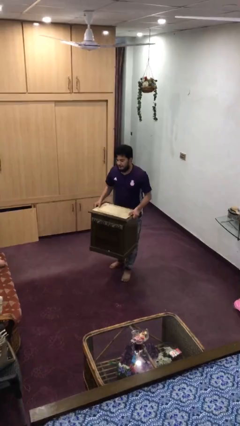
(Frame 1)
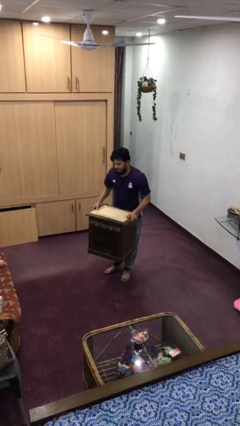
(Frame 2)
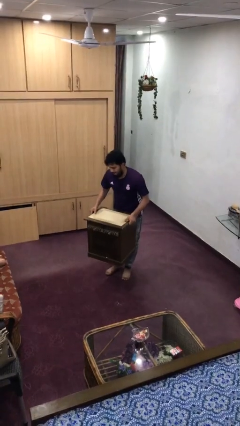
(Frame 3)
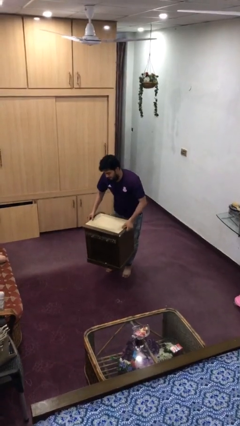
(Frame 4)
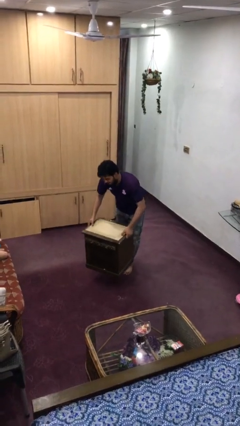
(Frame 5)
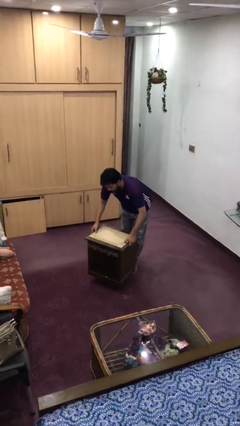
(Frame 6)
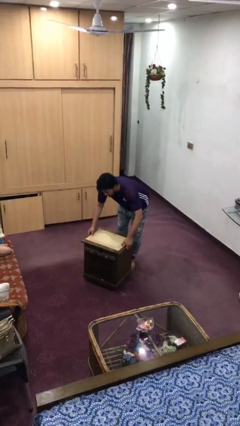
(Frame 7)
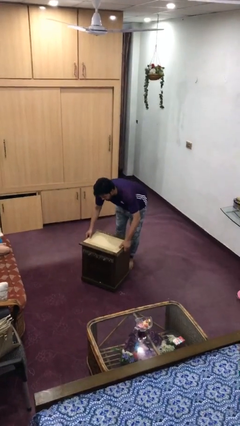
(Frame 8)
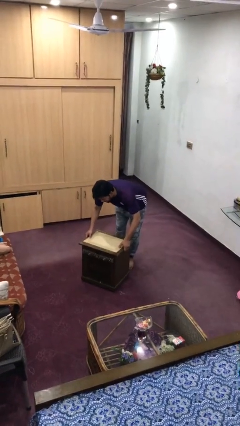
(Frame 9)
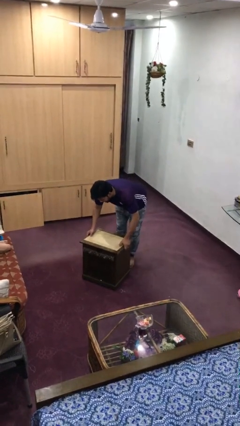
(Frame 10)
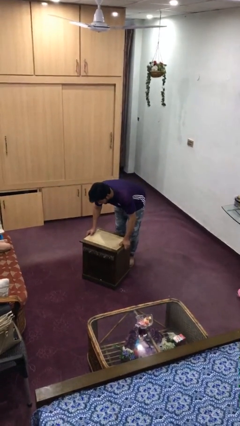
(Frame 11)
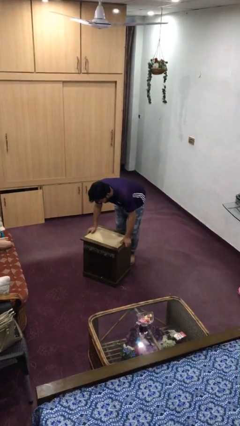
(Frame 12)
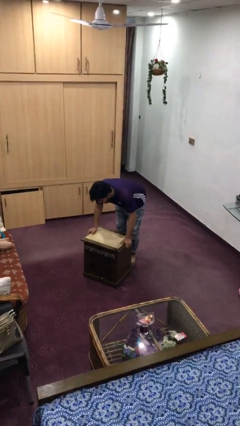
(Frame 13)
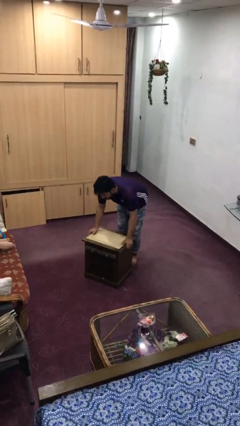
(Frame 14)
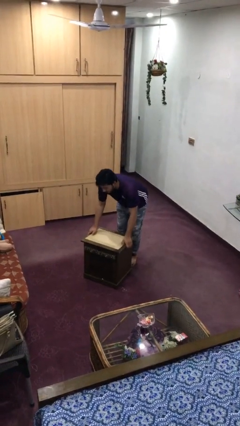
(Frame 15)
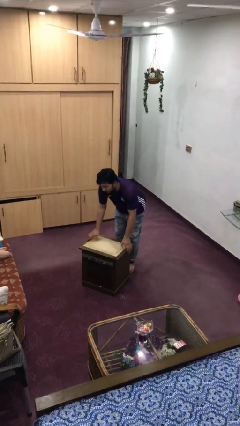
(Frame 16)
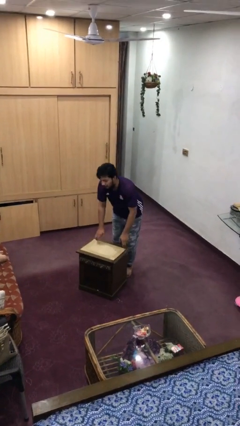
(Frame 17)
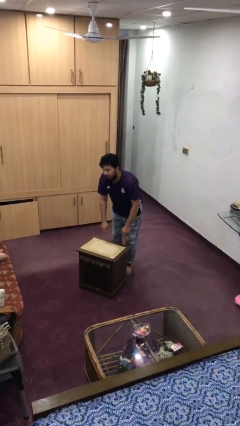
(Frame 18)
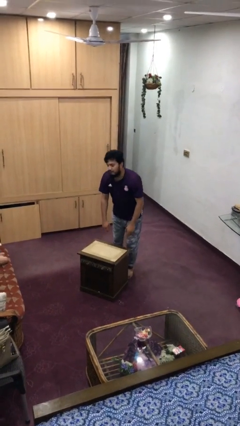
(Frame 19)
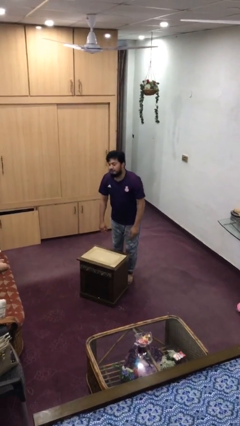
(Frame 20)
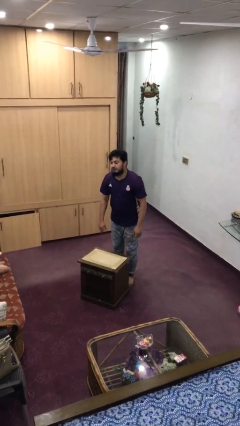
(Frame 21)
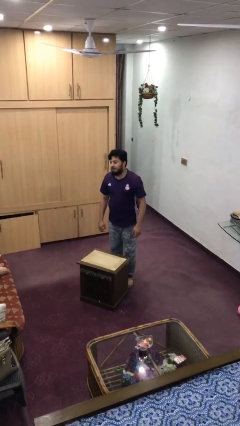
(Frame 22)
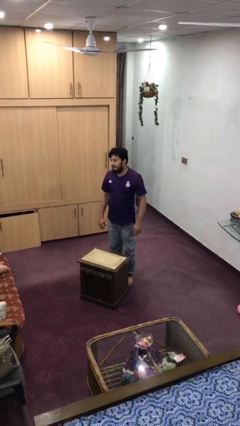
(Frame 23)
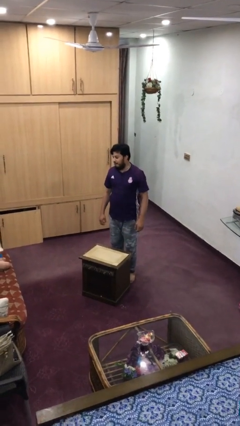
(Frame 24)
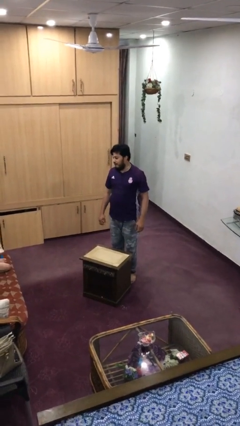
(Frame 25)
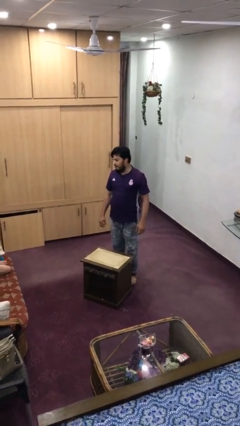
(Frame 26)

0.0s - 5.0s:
person puts down object on floor

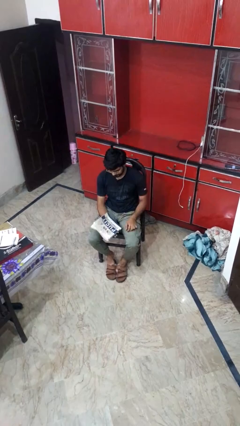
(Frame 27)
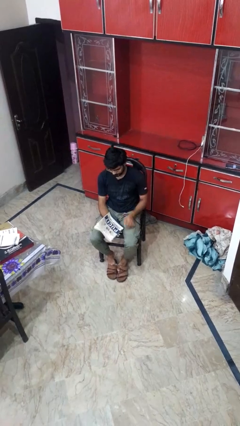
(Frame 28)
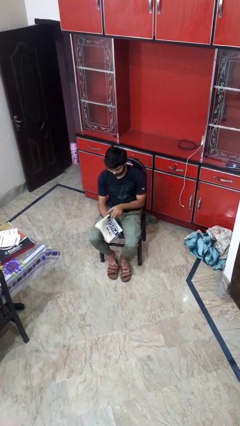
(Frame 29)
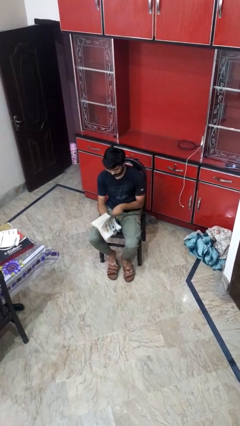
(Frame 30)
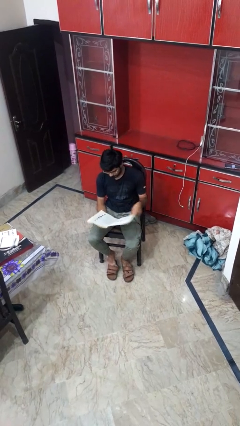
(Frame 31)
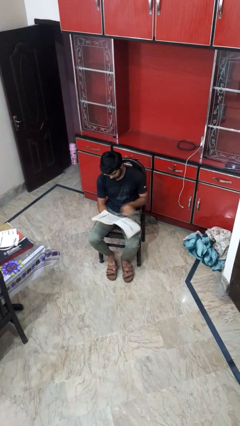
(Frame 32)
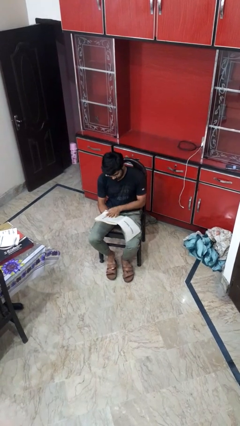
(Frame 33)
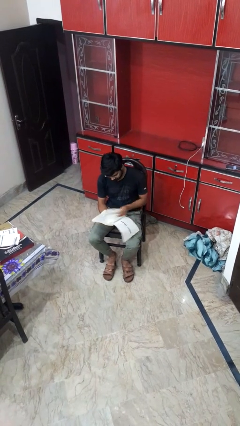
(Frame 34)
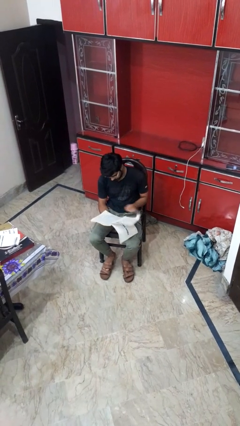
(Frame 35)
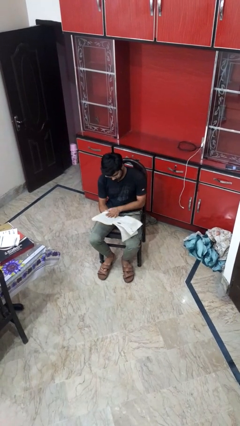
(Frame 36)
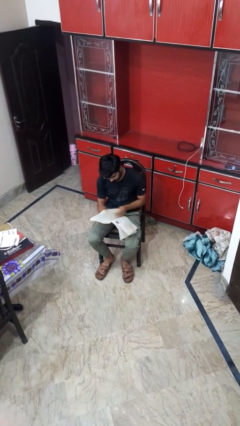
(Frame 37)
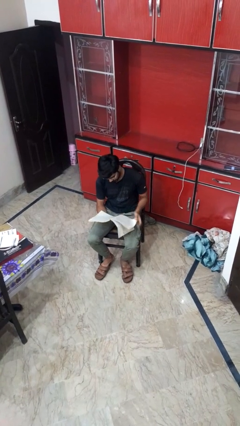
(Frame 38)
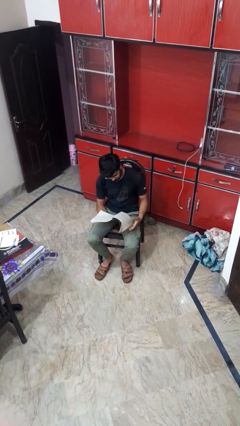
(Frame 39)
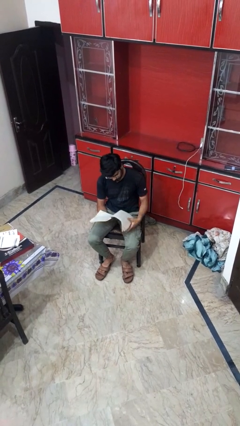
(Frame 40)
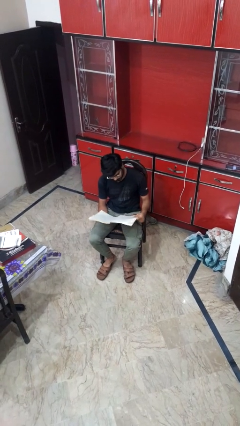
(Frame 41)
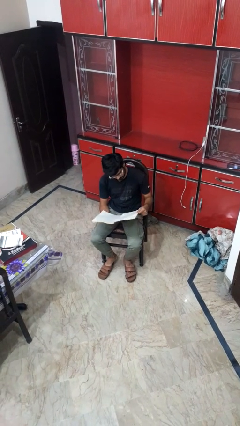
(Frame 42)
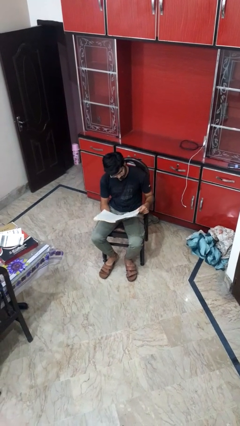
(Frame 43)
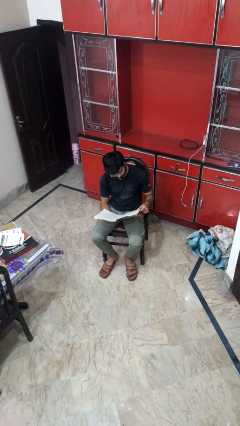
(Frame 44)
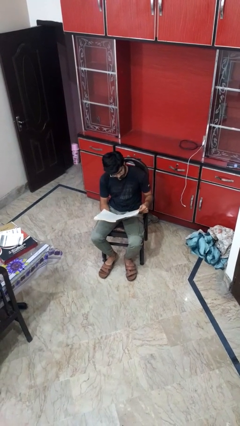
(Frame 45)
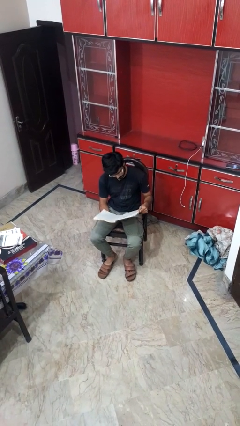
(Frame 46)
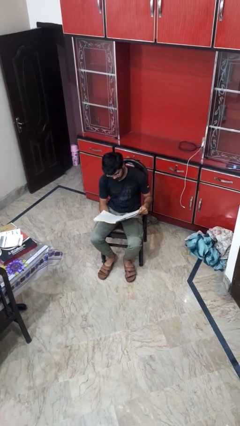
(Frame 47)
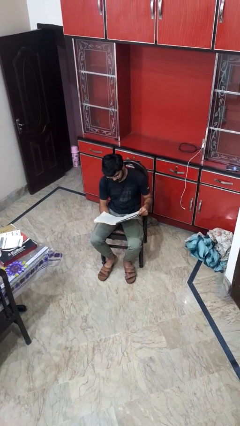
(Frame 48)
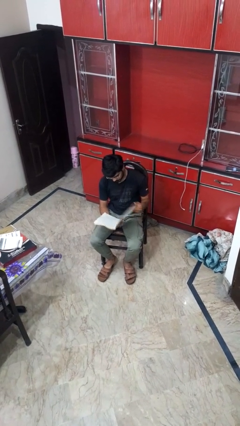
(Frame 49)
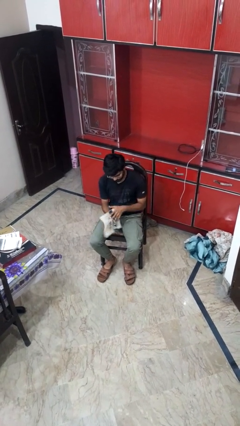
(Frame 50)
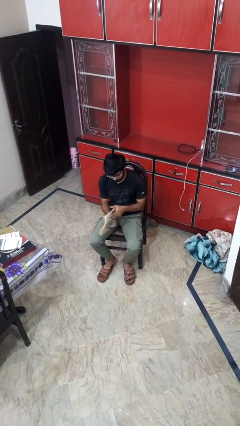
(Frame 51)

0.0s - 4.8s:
person reads magazine

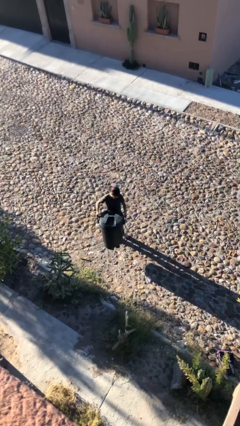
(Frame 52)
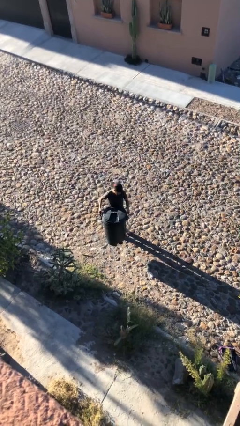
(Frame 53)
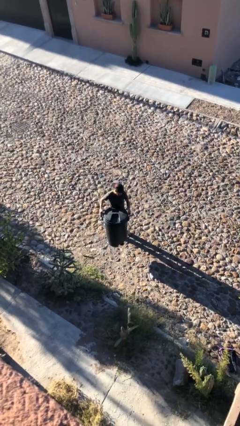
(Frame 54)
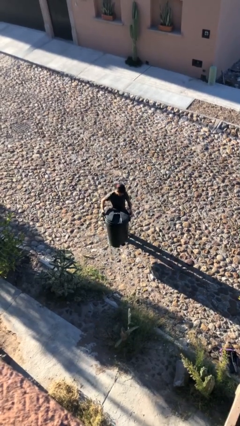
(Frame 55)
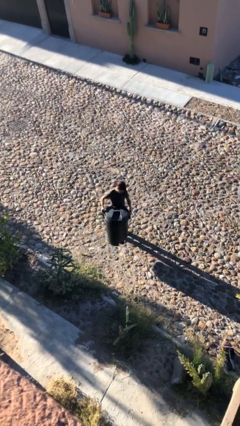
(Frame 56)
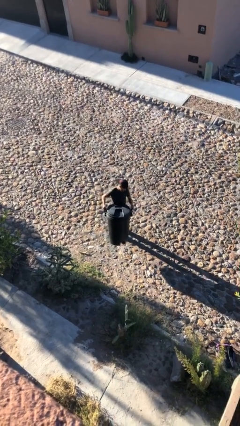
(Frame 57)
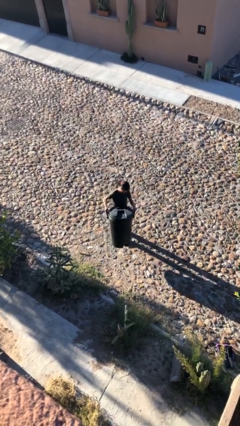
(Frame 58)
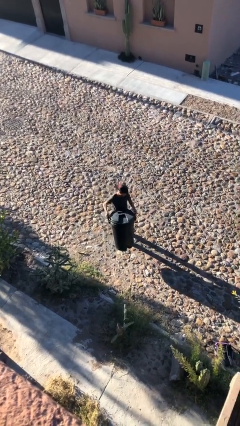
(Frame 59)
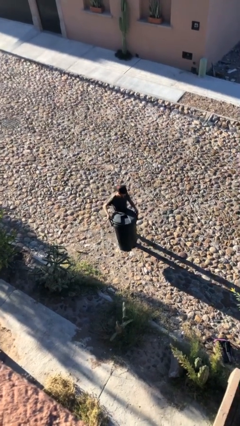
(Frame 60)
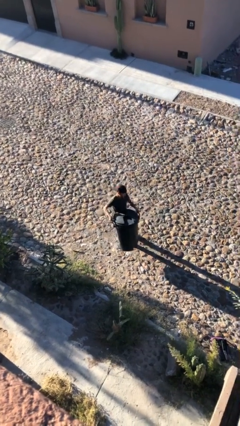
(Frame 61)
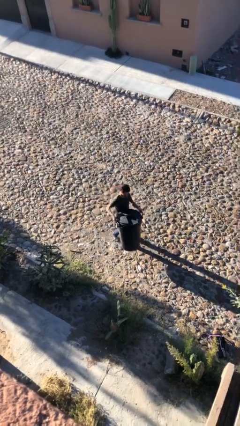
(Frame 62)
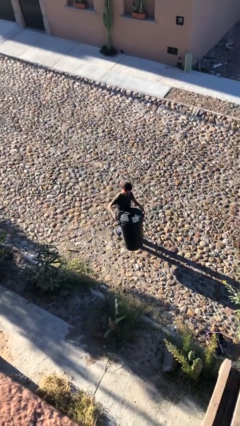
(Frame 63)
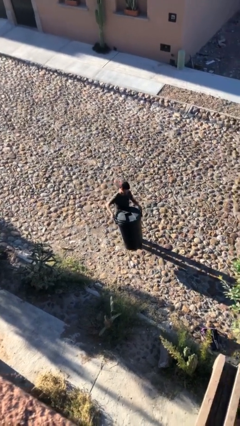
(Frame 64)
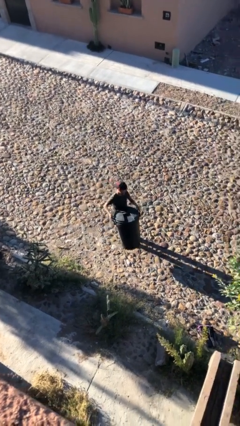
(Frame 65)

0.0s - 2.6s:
person carries heavy object

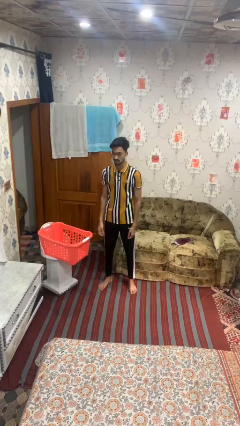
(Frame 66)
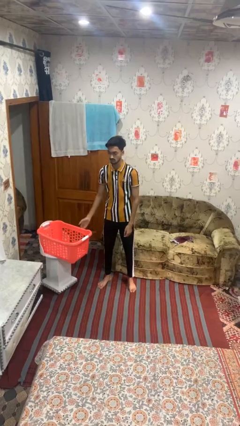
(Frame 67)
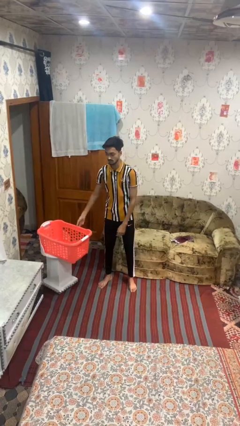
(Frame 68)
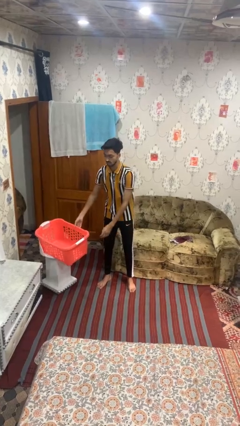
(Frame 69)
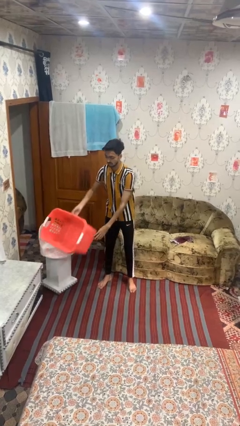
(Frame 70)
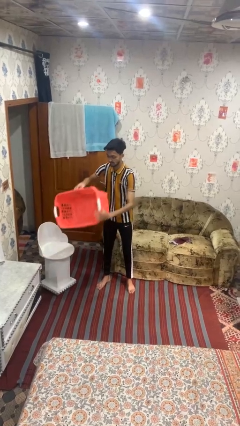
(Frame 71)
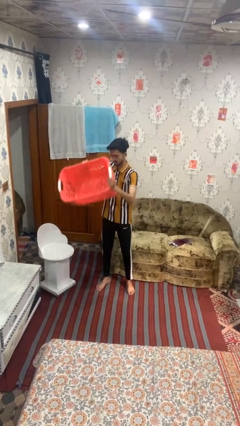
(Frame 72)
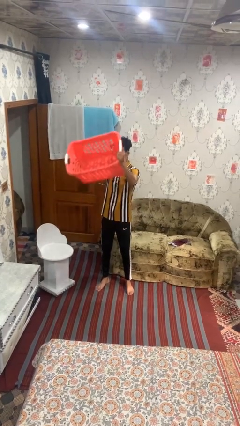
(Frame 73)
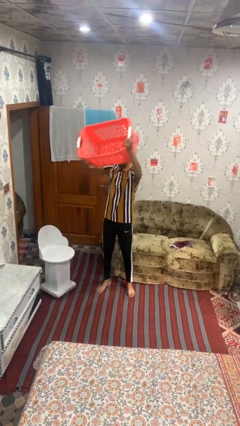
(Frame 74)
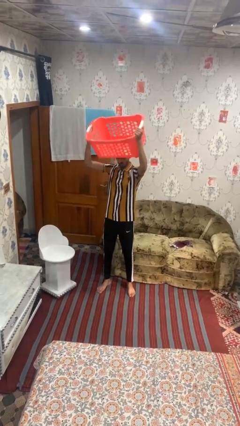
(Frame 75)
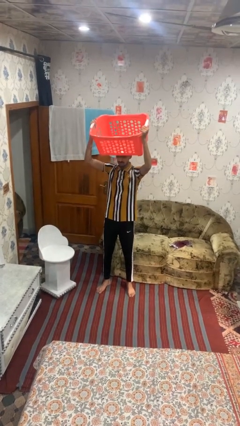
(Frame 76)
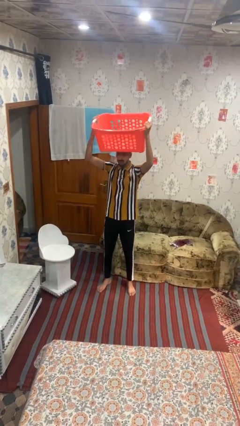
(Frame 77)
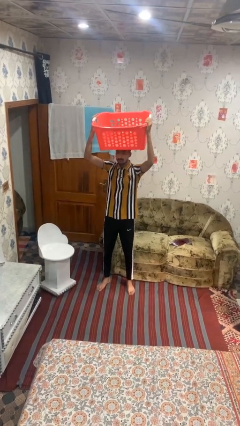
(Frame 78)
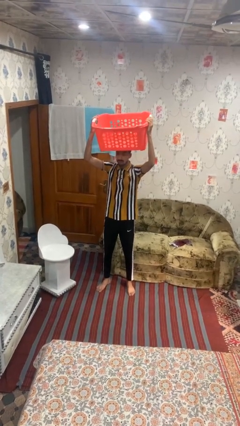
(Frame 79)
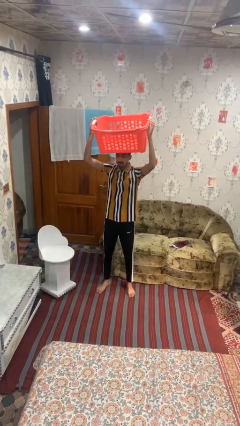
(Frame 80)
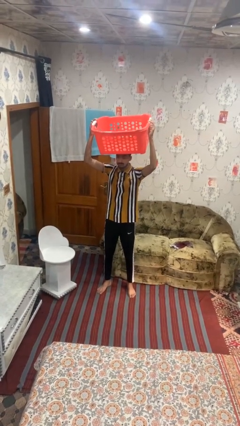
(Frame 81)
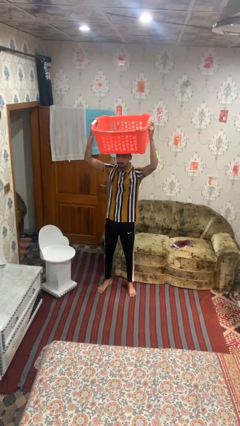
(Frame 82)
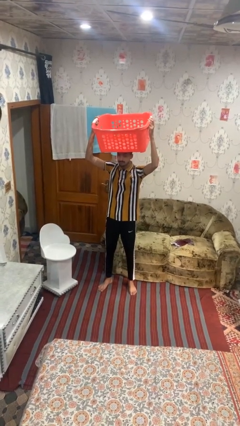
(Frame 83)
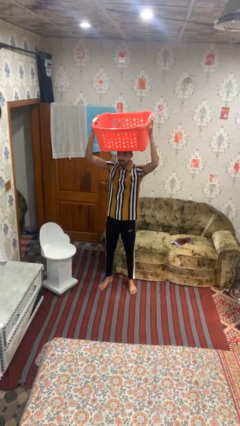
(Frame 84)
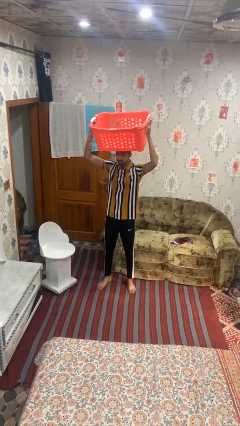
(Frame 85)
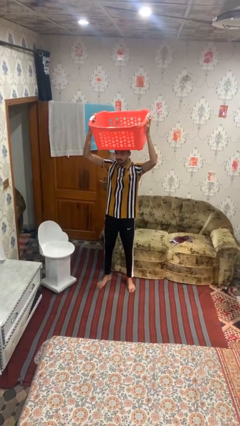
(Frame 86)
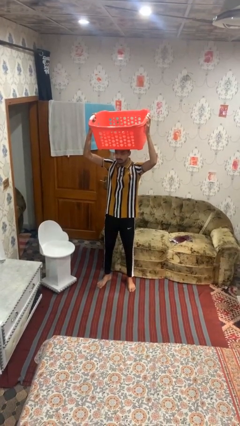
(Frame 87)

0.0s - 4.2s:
person holds object above head

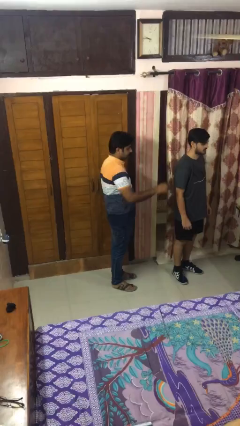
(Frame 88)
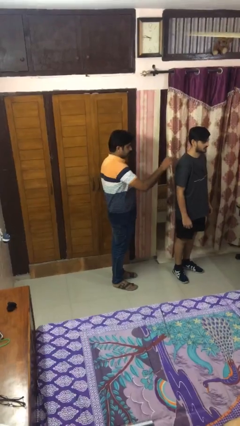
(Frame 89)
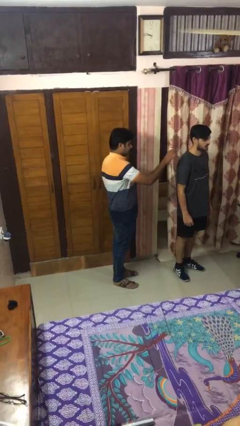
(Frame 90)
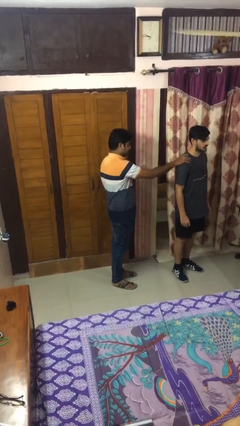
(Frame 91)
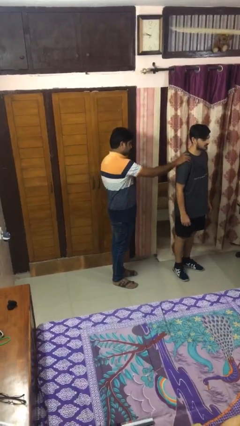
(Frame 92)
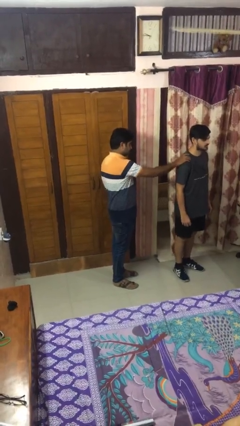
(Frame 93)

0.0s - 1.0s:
person grabs person by shoulder

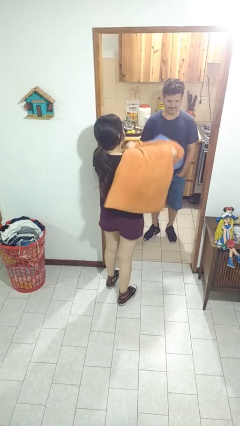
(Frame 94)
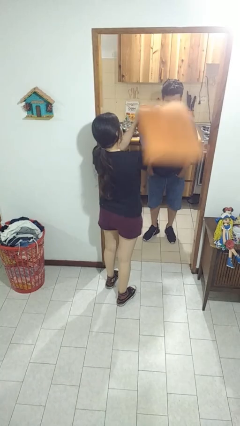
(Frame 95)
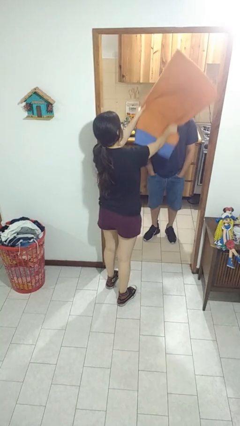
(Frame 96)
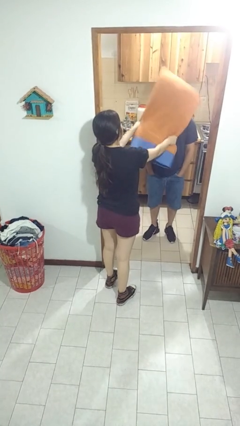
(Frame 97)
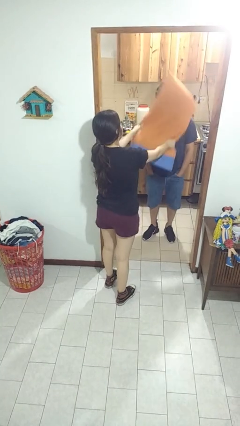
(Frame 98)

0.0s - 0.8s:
person hits person with pillow
